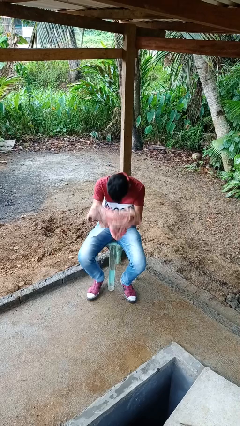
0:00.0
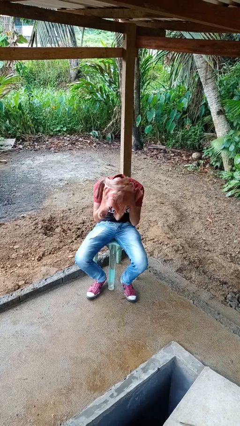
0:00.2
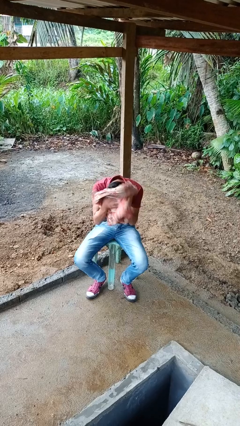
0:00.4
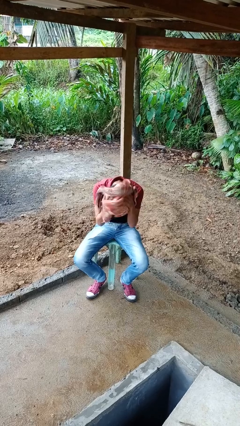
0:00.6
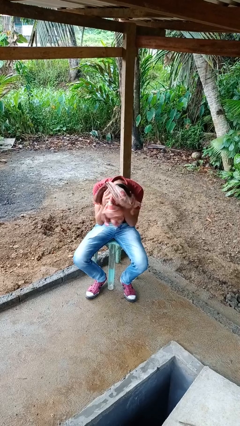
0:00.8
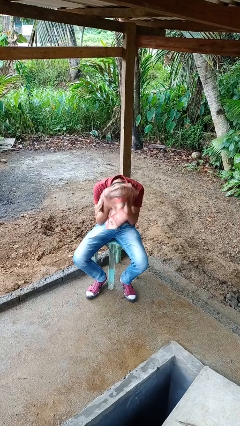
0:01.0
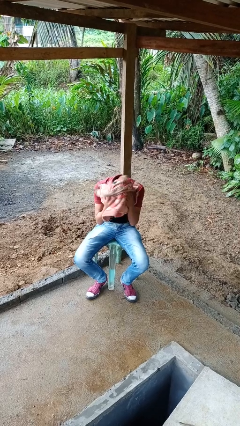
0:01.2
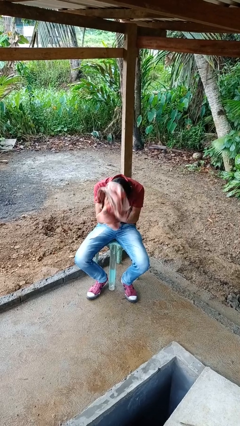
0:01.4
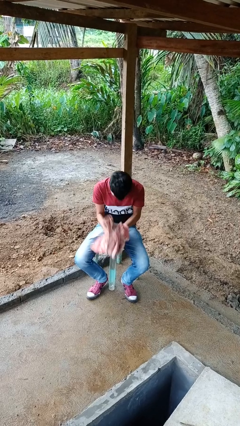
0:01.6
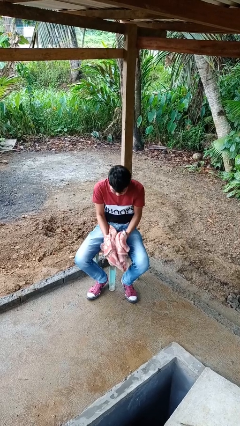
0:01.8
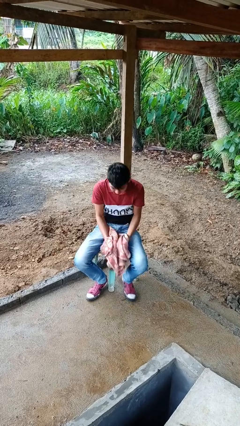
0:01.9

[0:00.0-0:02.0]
person dries hair with towel

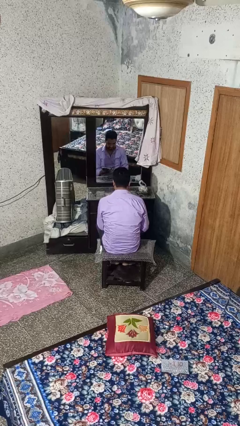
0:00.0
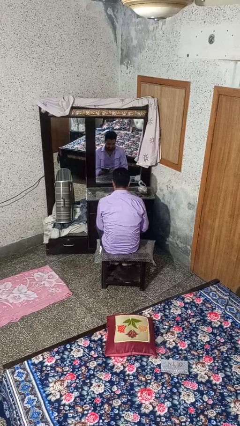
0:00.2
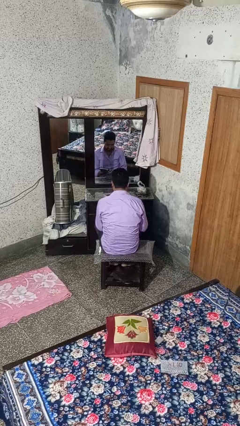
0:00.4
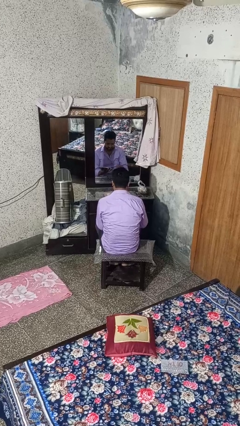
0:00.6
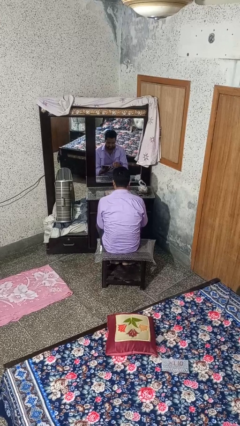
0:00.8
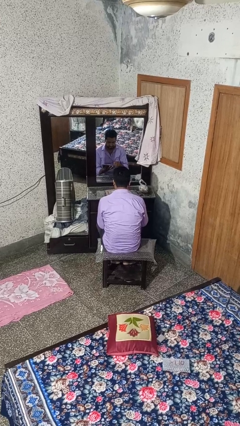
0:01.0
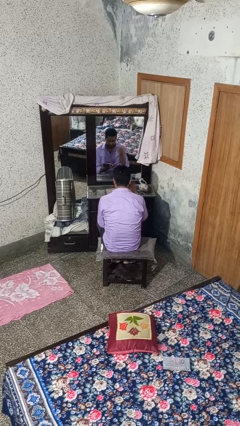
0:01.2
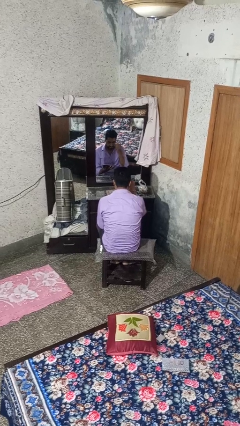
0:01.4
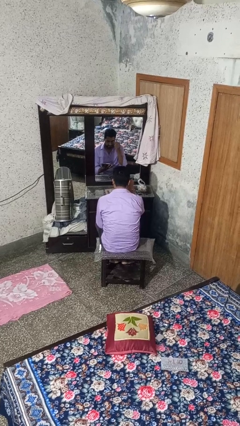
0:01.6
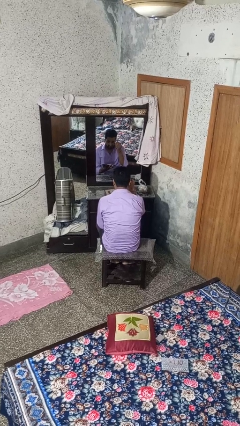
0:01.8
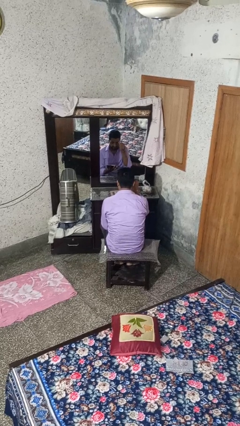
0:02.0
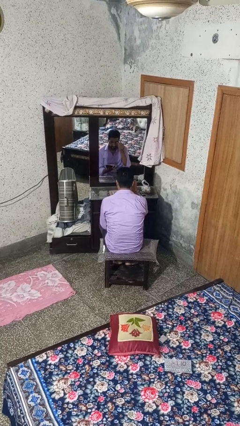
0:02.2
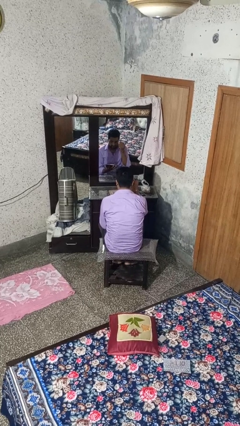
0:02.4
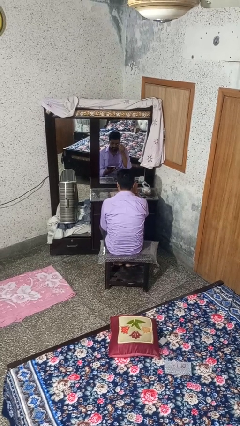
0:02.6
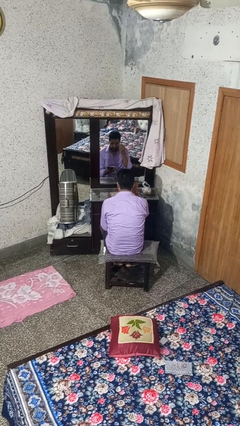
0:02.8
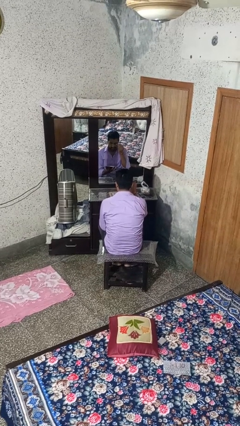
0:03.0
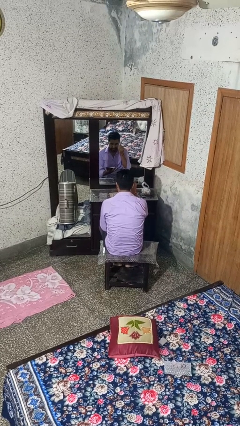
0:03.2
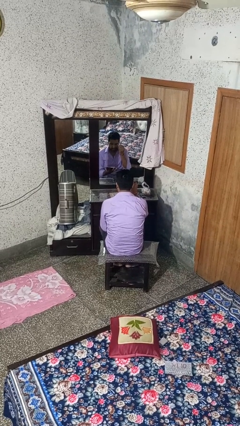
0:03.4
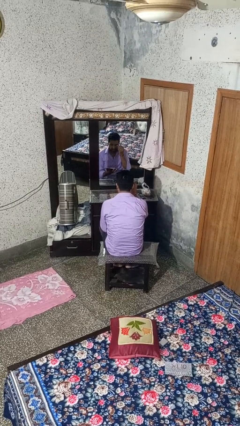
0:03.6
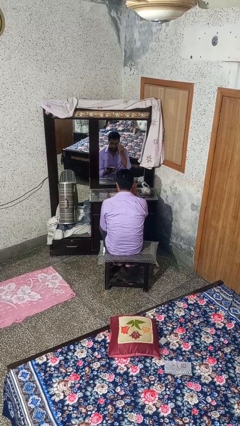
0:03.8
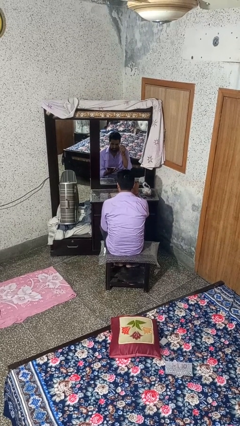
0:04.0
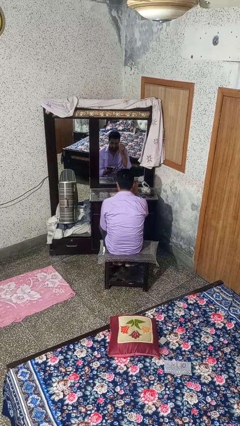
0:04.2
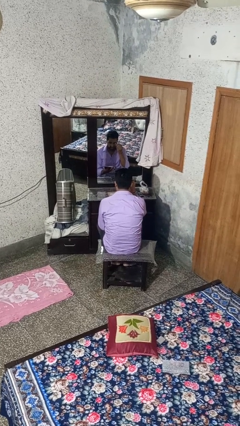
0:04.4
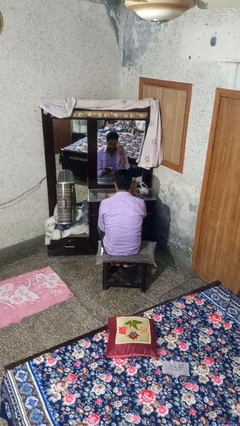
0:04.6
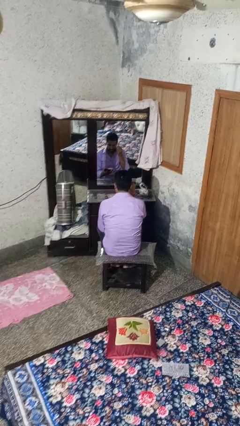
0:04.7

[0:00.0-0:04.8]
person applies eye makeup

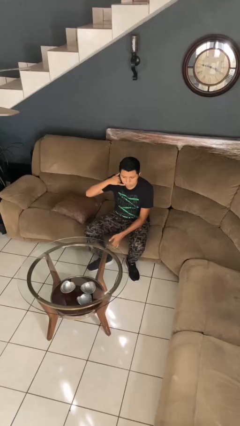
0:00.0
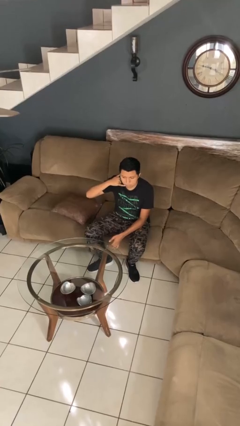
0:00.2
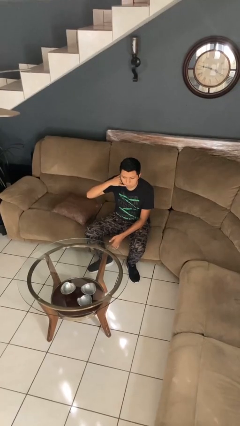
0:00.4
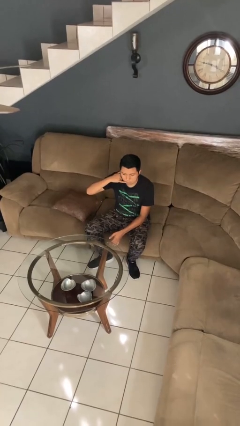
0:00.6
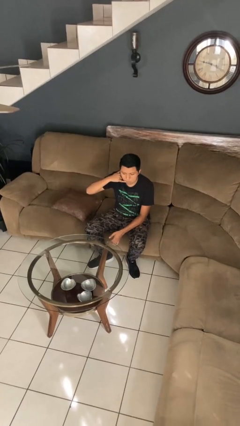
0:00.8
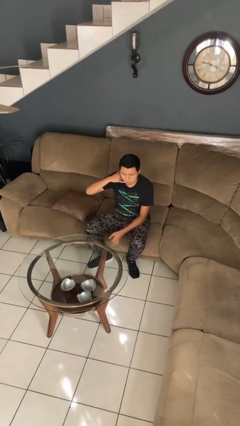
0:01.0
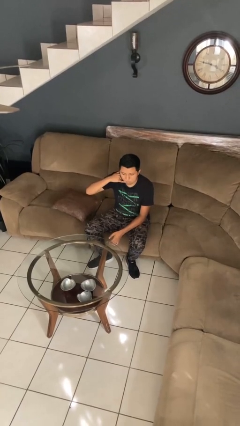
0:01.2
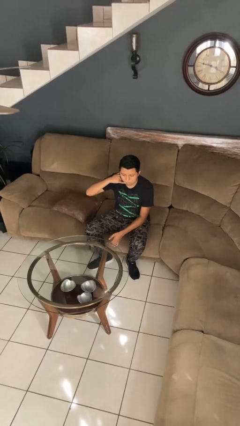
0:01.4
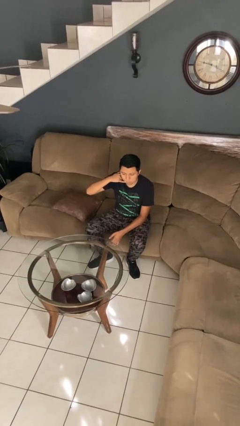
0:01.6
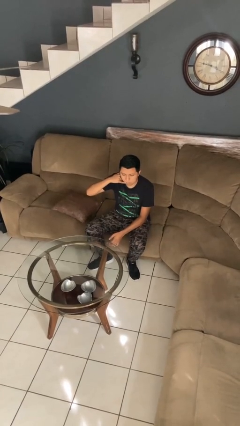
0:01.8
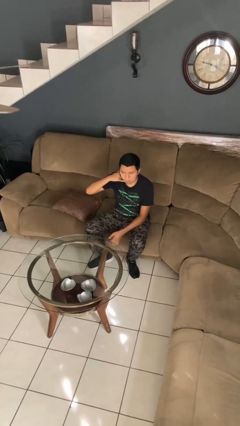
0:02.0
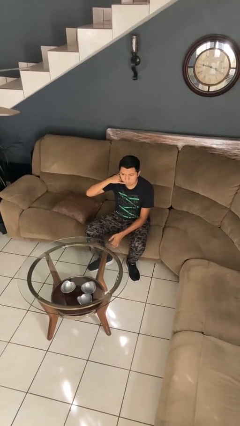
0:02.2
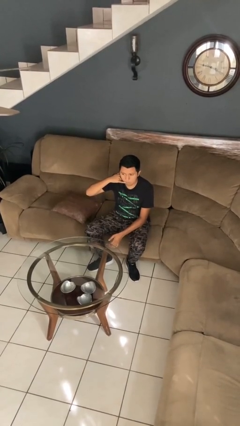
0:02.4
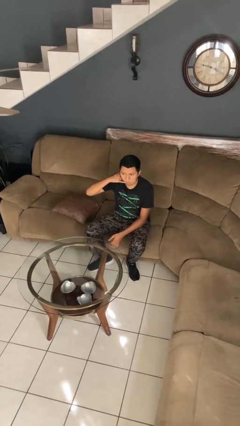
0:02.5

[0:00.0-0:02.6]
person gestures call me

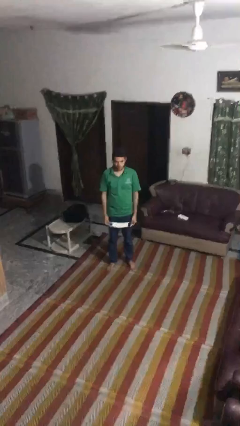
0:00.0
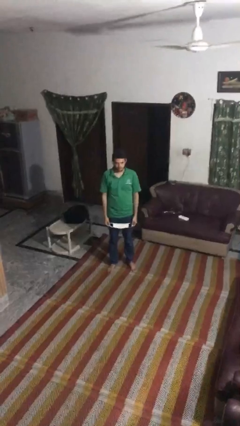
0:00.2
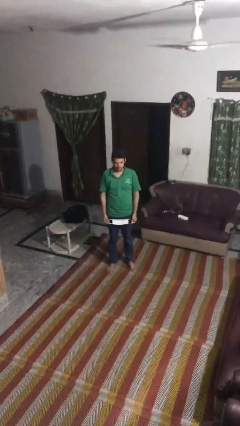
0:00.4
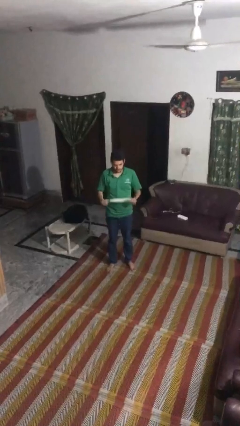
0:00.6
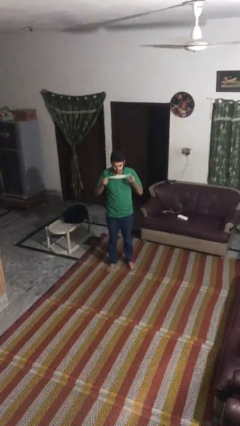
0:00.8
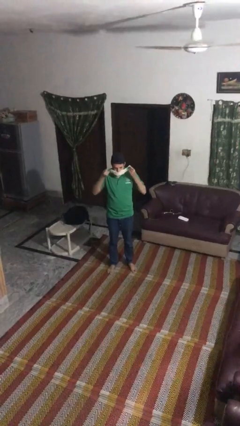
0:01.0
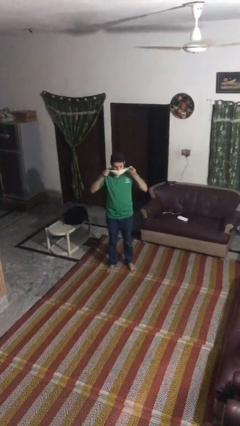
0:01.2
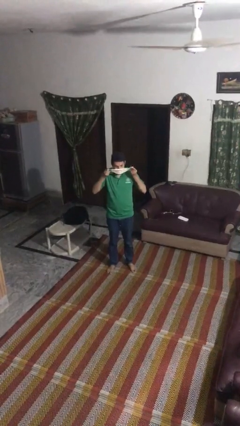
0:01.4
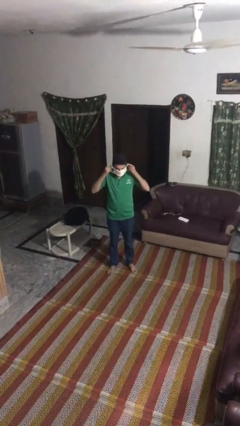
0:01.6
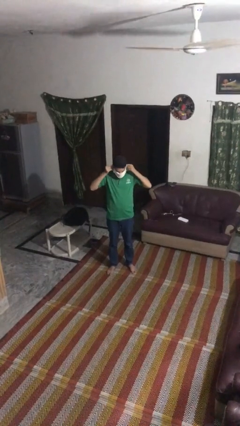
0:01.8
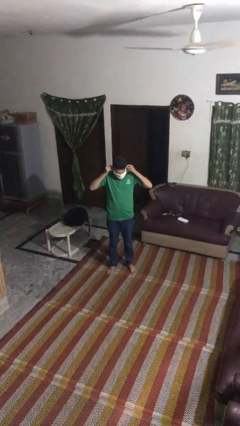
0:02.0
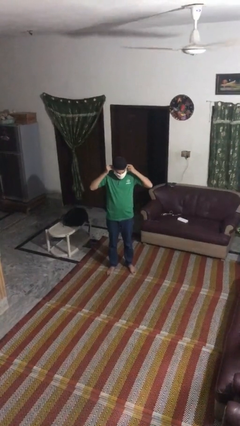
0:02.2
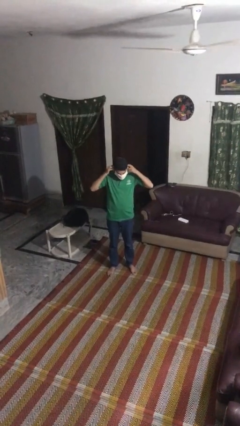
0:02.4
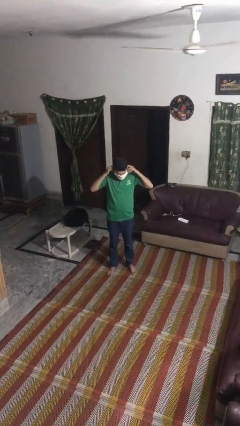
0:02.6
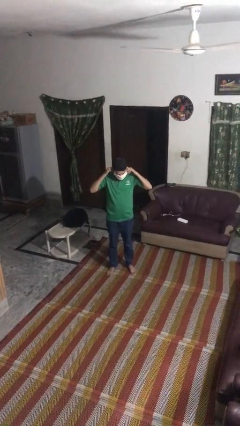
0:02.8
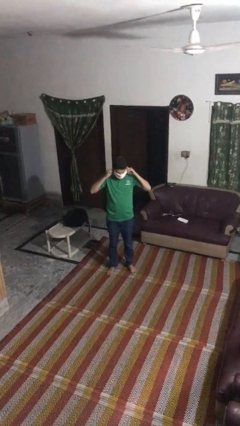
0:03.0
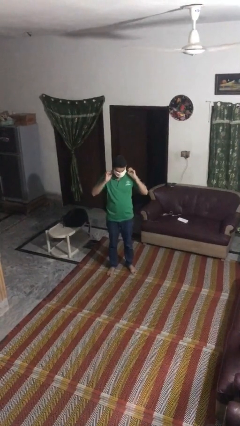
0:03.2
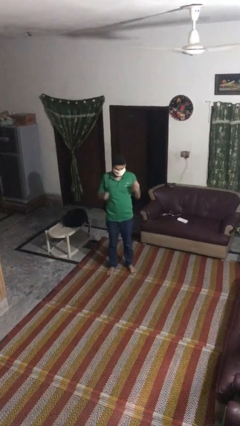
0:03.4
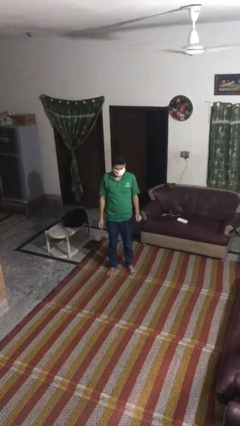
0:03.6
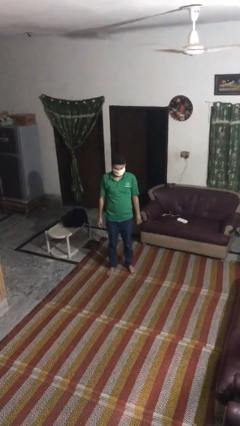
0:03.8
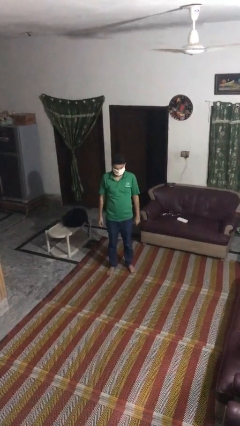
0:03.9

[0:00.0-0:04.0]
person puts on facemask

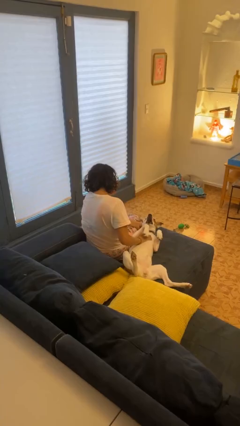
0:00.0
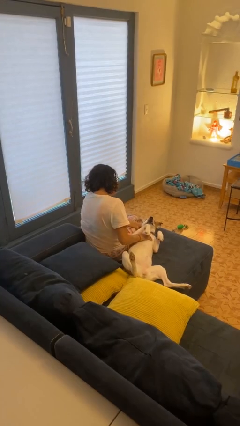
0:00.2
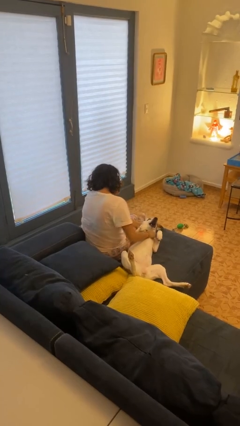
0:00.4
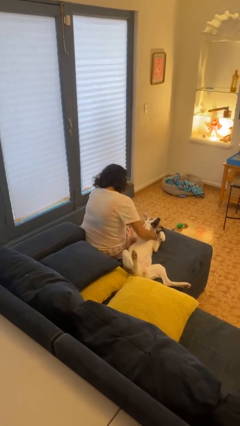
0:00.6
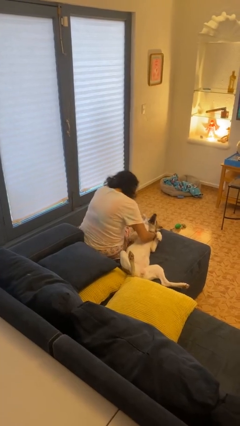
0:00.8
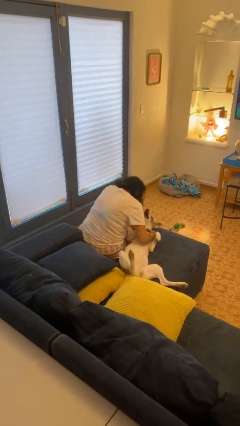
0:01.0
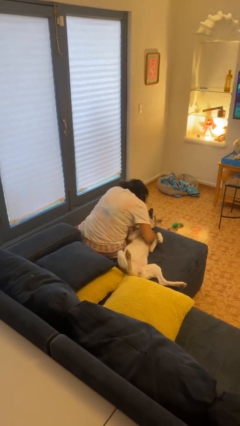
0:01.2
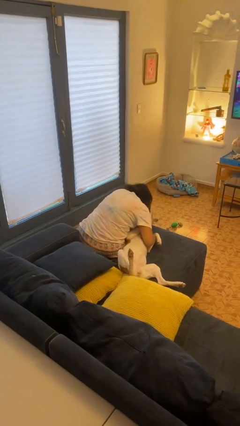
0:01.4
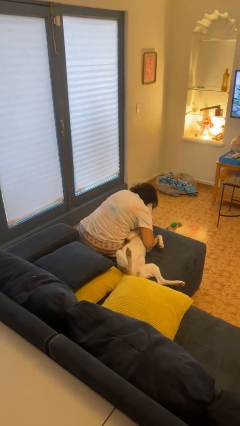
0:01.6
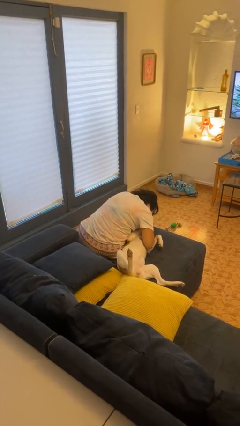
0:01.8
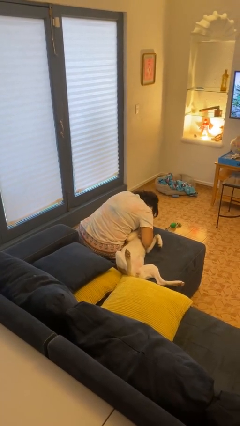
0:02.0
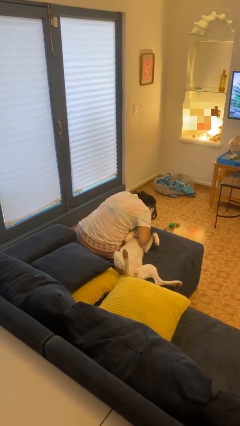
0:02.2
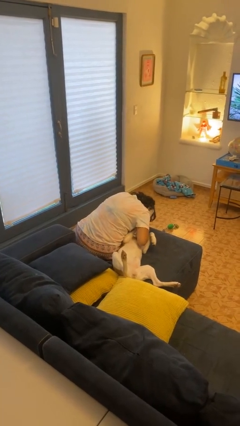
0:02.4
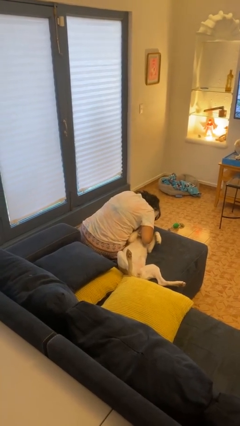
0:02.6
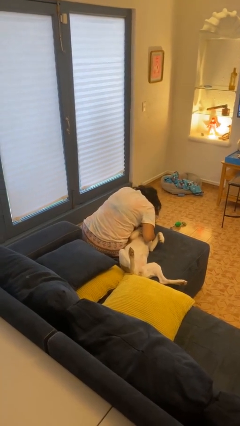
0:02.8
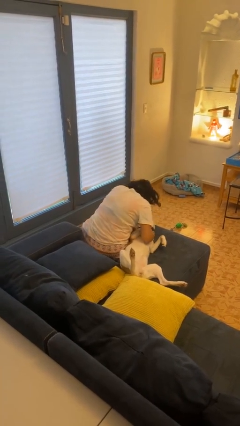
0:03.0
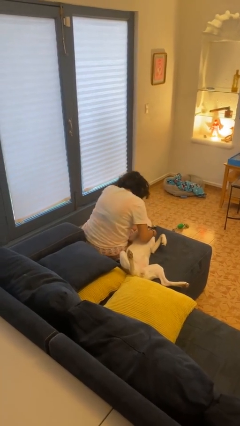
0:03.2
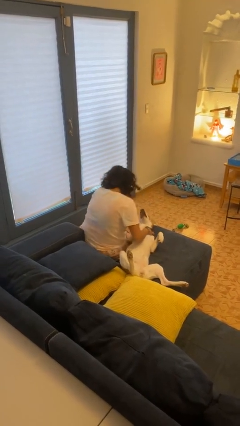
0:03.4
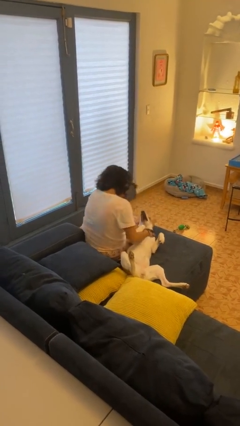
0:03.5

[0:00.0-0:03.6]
person hugs dog

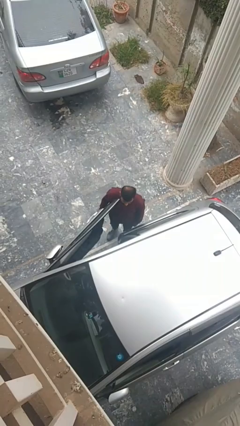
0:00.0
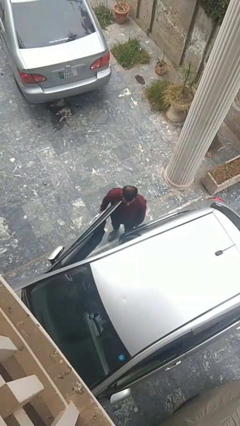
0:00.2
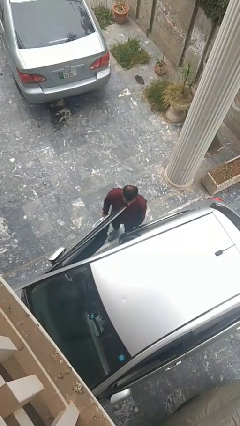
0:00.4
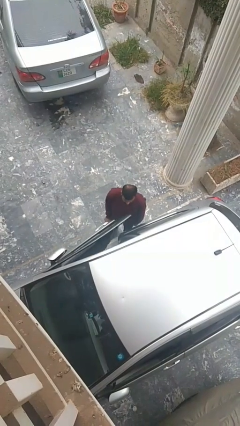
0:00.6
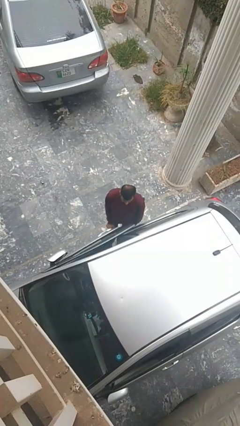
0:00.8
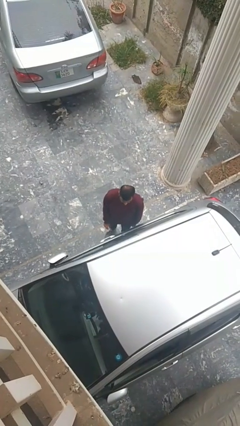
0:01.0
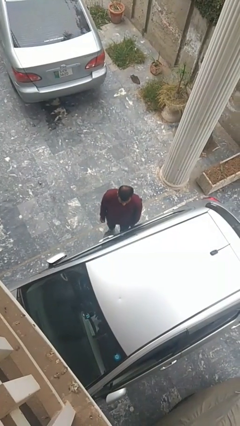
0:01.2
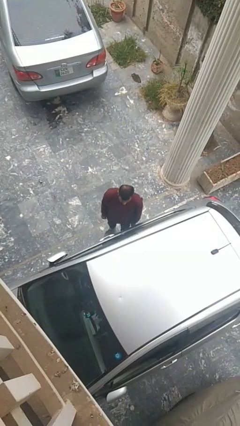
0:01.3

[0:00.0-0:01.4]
person closes car door
